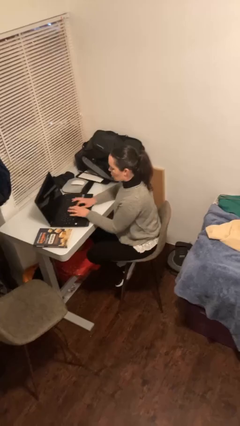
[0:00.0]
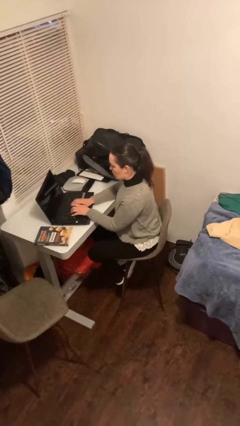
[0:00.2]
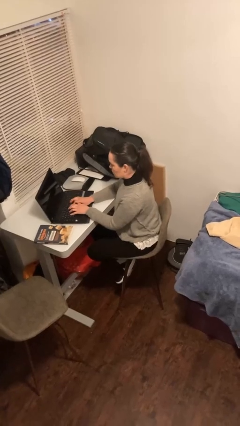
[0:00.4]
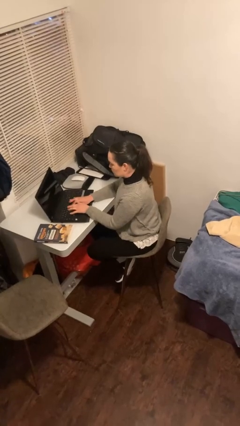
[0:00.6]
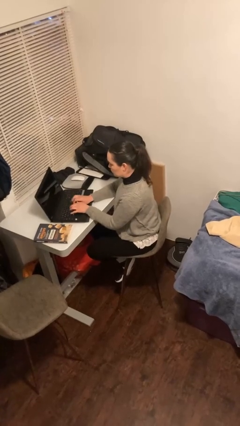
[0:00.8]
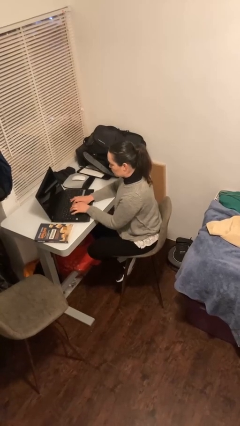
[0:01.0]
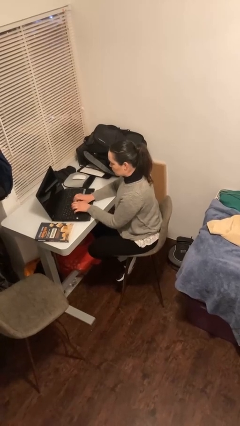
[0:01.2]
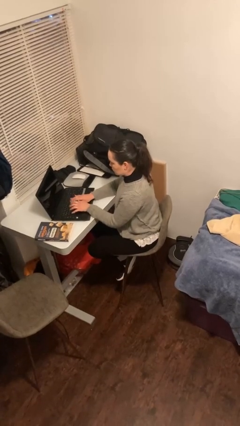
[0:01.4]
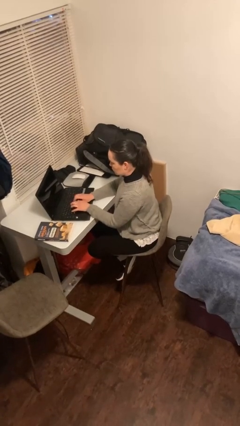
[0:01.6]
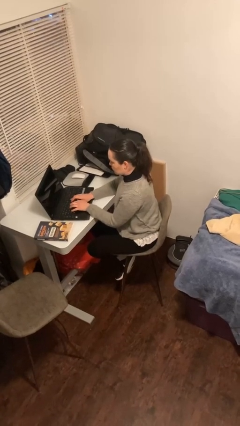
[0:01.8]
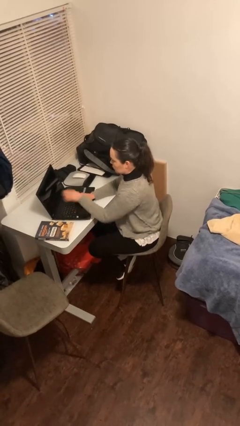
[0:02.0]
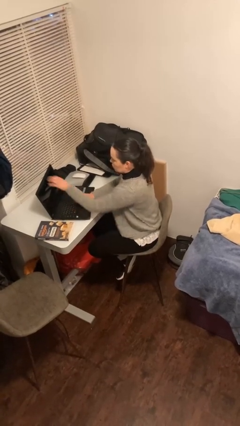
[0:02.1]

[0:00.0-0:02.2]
person interacts with laptop

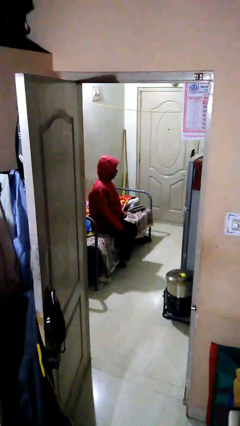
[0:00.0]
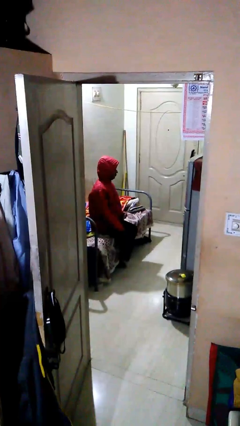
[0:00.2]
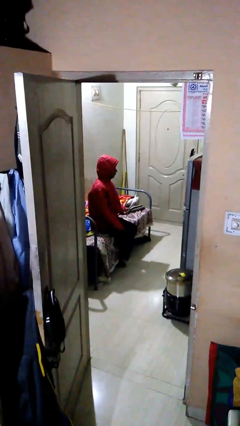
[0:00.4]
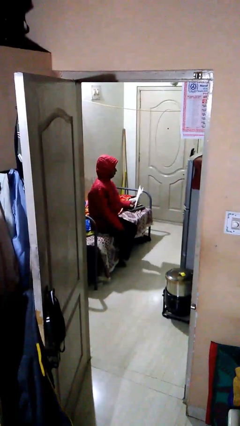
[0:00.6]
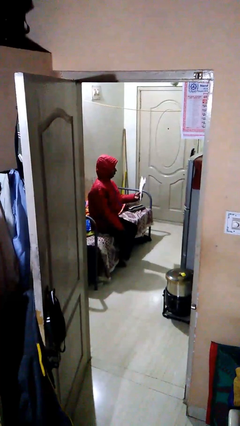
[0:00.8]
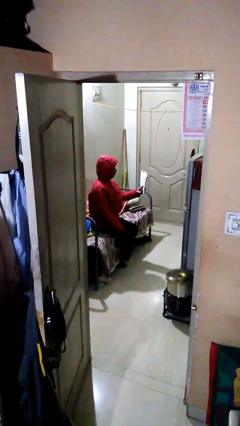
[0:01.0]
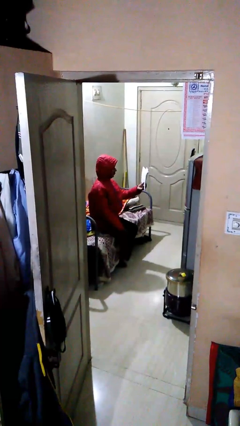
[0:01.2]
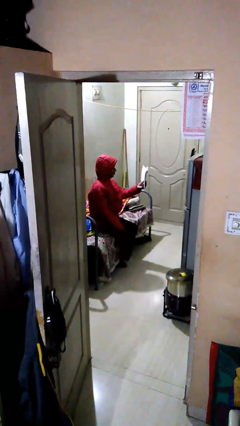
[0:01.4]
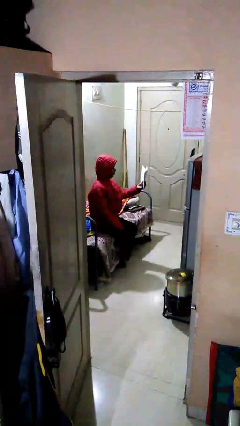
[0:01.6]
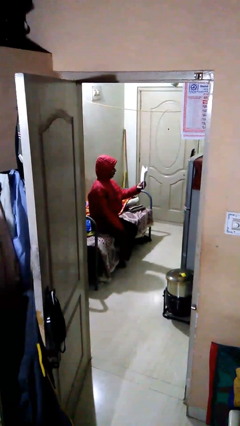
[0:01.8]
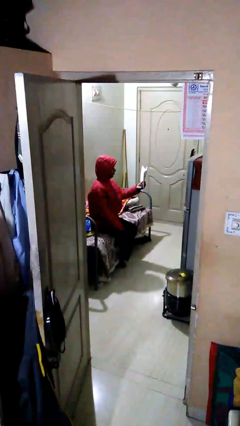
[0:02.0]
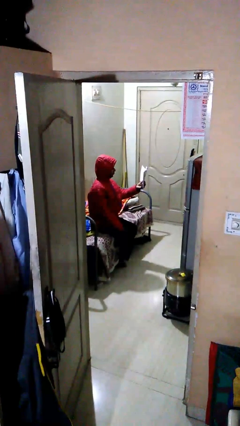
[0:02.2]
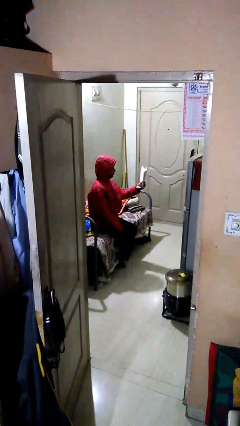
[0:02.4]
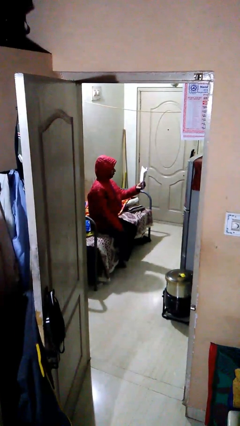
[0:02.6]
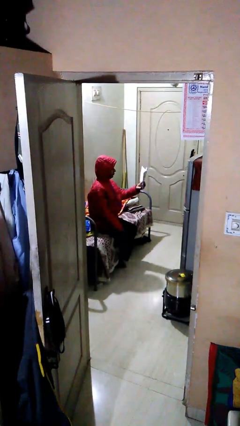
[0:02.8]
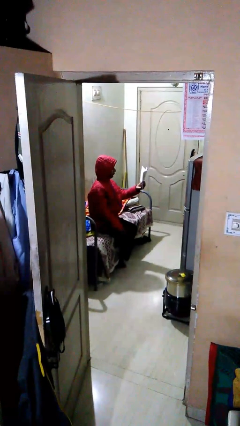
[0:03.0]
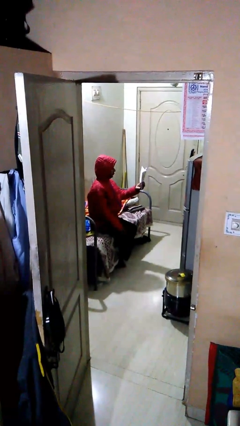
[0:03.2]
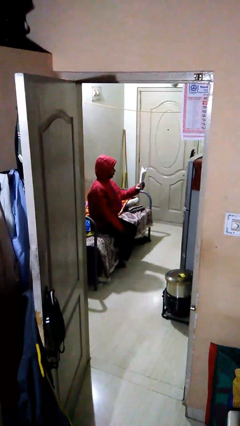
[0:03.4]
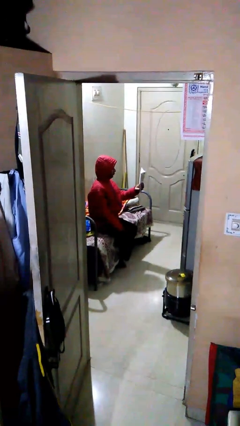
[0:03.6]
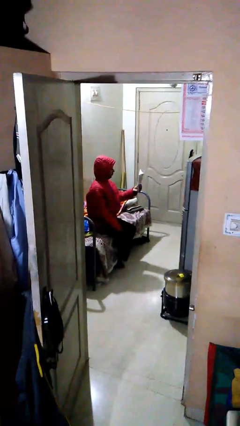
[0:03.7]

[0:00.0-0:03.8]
person reads document

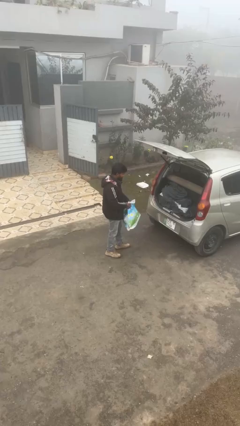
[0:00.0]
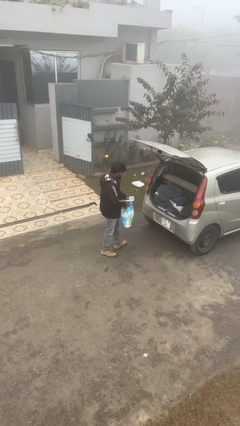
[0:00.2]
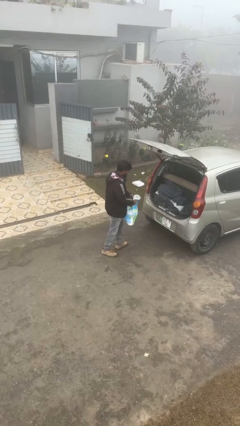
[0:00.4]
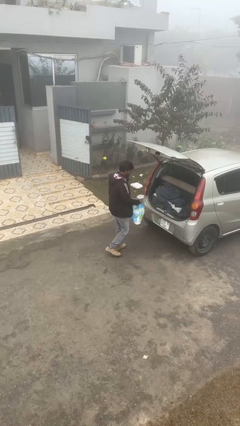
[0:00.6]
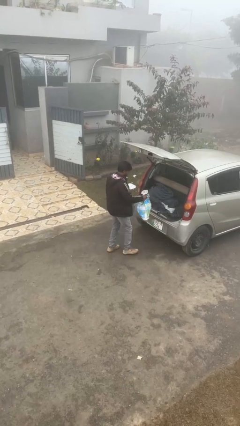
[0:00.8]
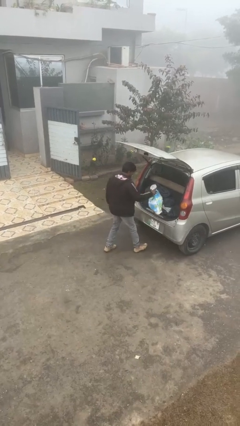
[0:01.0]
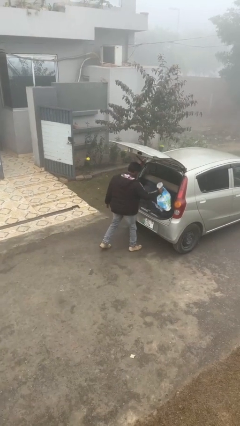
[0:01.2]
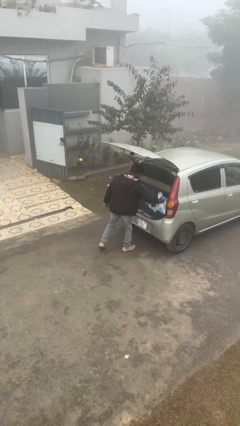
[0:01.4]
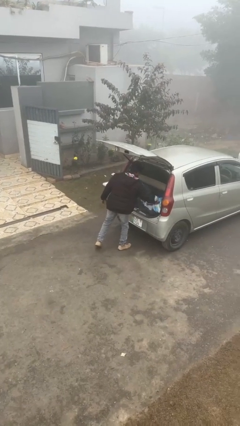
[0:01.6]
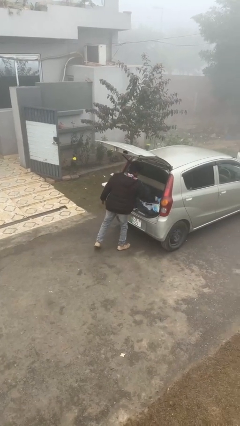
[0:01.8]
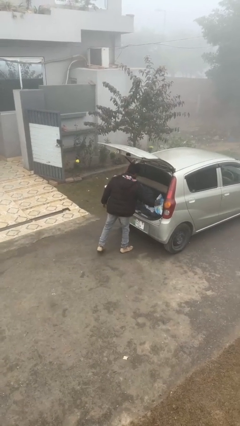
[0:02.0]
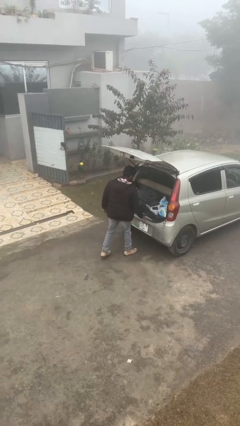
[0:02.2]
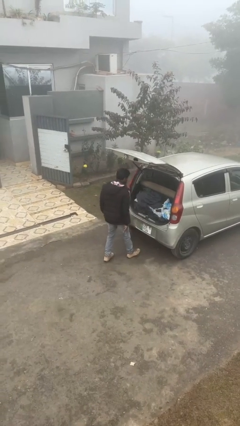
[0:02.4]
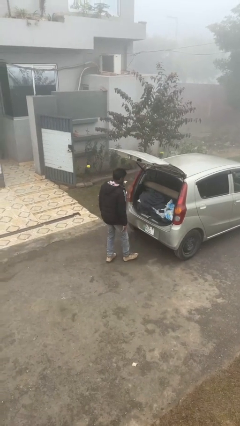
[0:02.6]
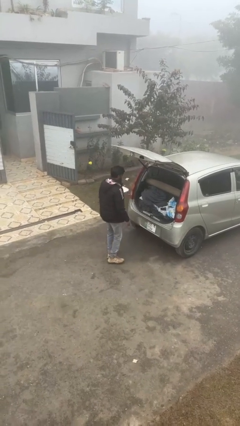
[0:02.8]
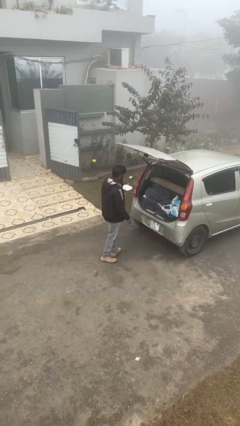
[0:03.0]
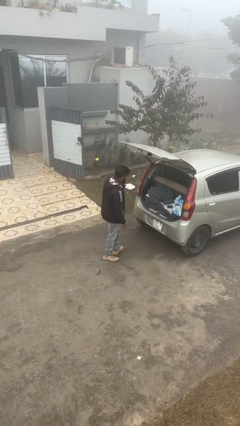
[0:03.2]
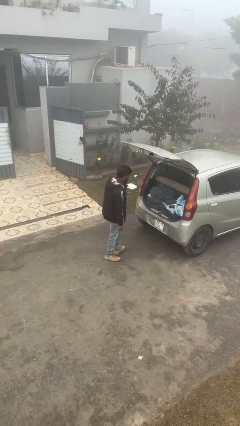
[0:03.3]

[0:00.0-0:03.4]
person loads car

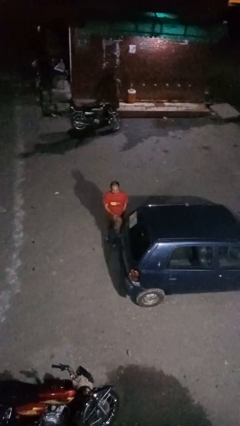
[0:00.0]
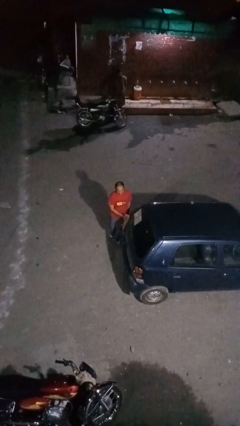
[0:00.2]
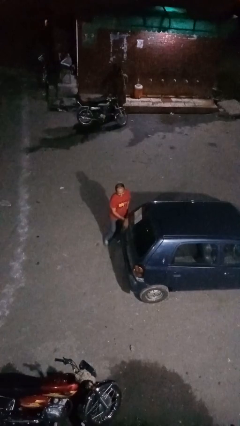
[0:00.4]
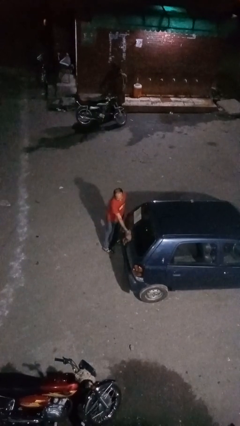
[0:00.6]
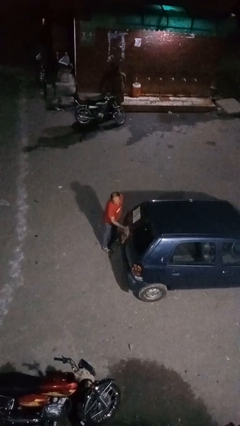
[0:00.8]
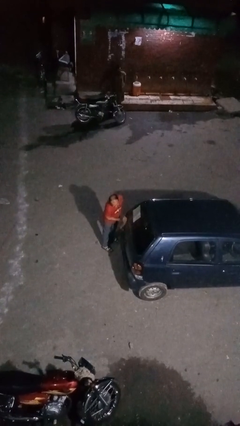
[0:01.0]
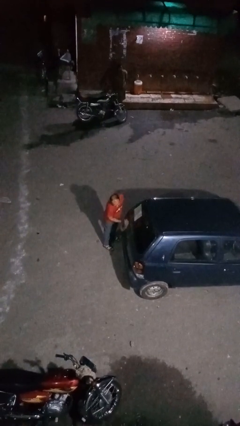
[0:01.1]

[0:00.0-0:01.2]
person polishes car with rag

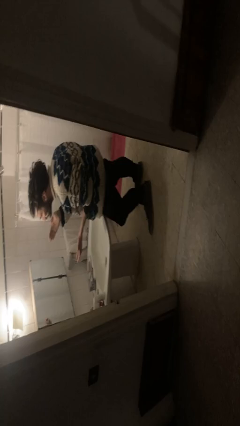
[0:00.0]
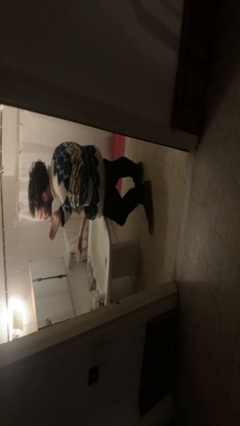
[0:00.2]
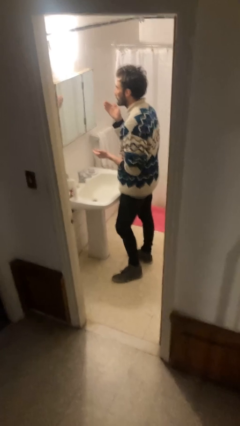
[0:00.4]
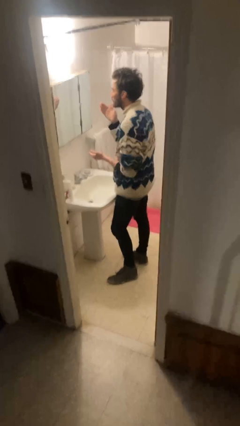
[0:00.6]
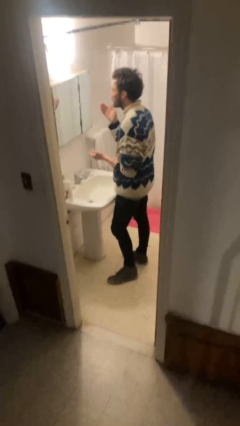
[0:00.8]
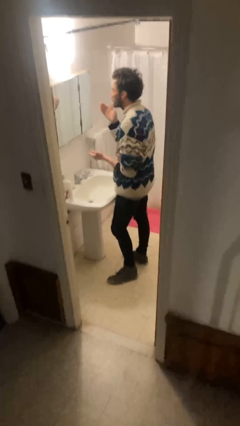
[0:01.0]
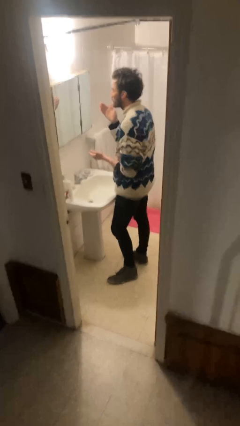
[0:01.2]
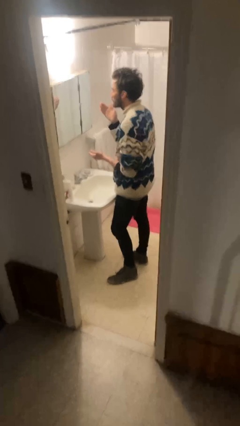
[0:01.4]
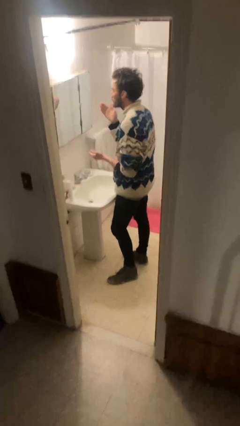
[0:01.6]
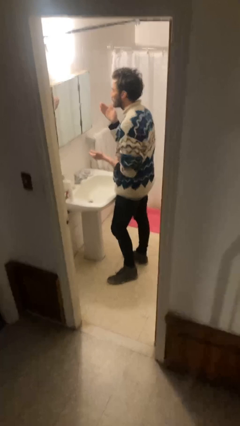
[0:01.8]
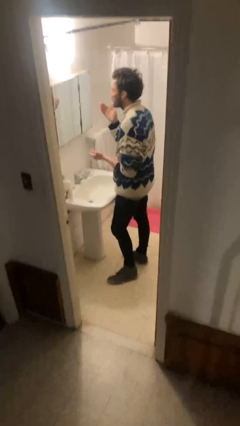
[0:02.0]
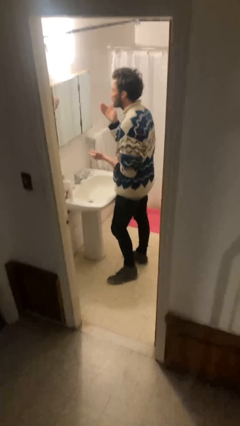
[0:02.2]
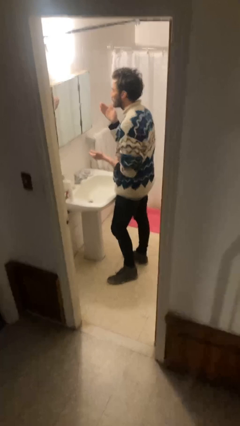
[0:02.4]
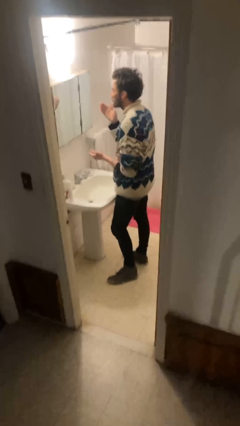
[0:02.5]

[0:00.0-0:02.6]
person applies foundation makeup

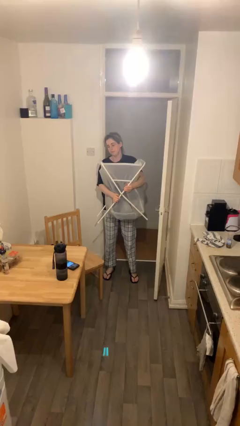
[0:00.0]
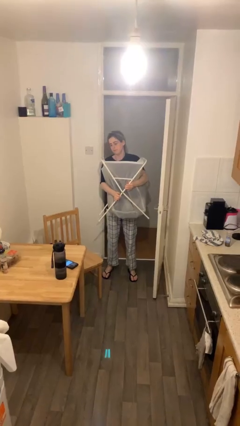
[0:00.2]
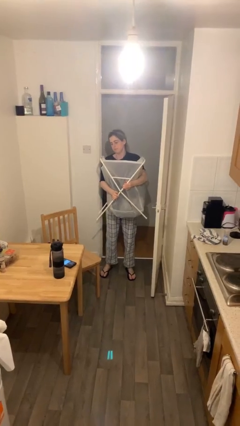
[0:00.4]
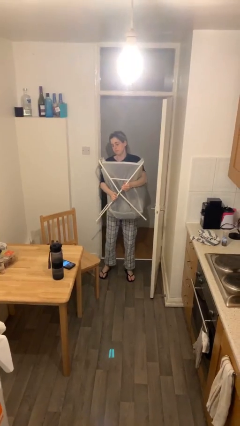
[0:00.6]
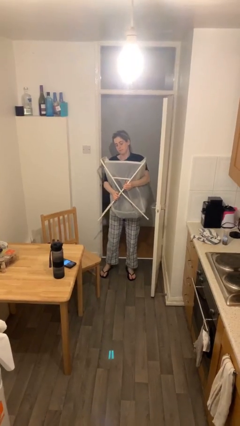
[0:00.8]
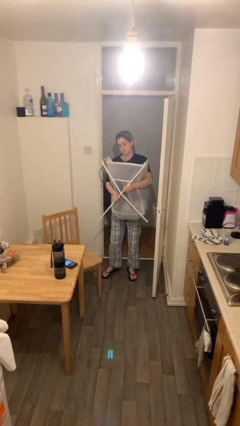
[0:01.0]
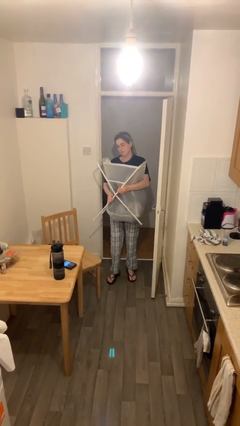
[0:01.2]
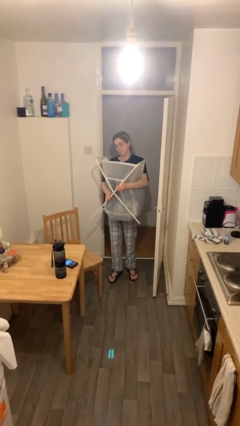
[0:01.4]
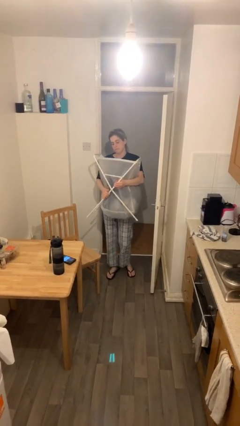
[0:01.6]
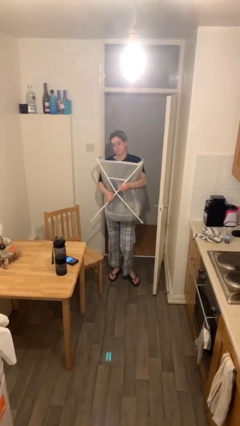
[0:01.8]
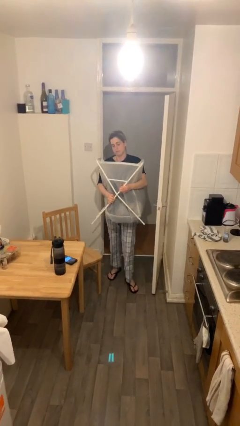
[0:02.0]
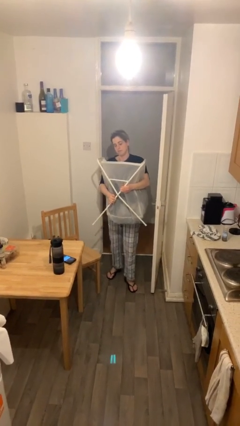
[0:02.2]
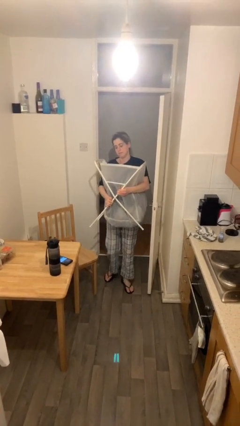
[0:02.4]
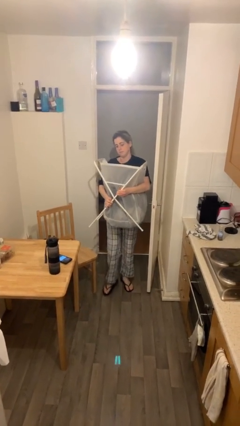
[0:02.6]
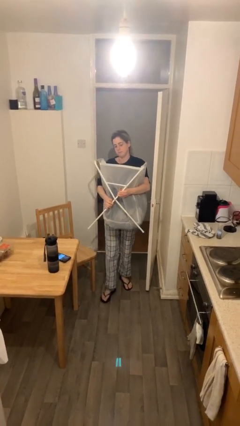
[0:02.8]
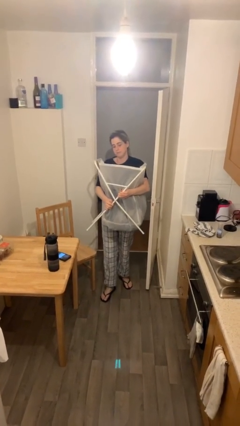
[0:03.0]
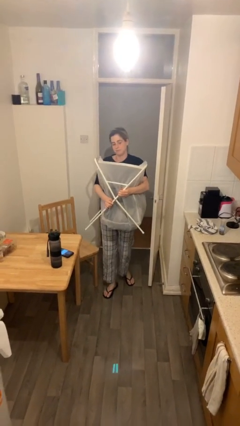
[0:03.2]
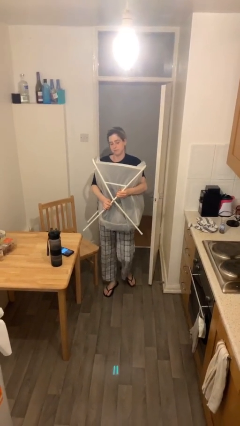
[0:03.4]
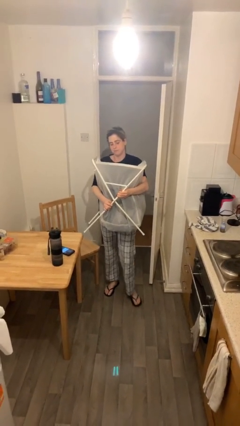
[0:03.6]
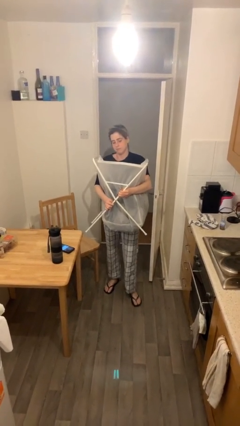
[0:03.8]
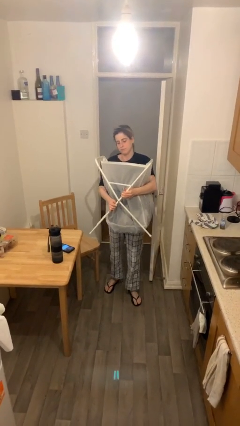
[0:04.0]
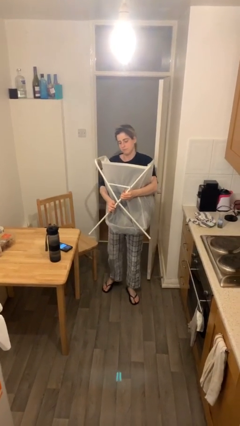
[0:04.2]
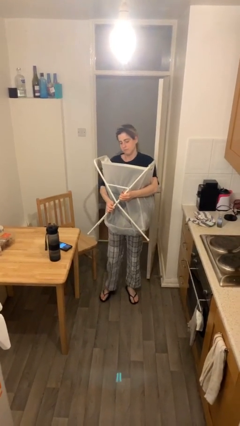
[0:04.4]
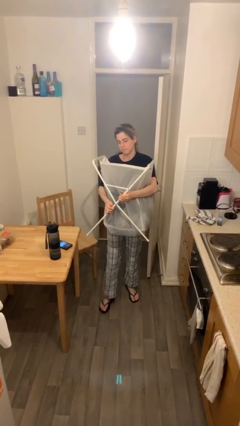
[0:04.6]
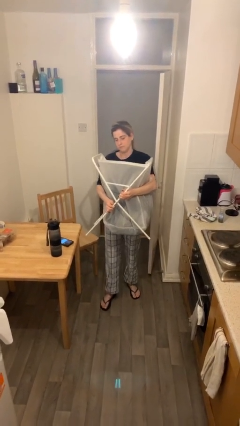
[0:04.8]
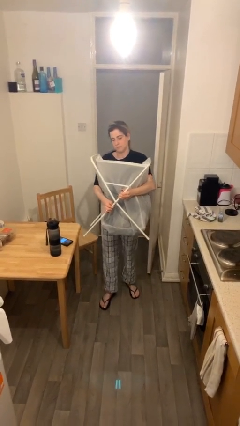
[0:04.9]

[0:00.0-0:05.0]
person carries heavy object
